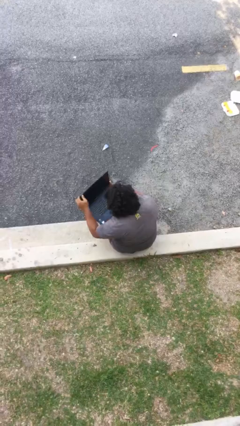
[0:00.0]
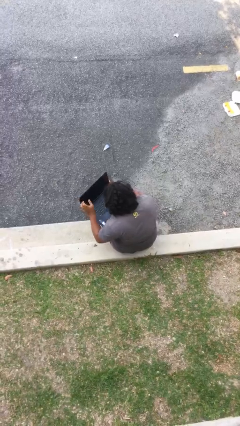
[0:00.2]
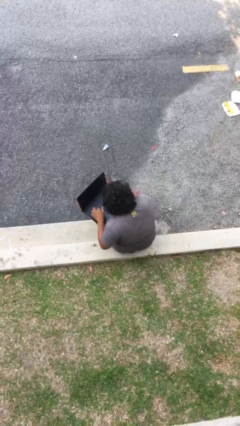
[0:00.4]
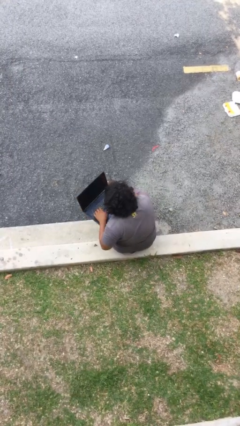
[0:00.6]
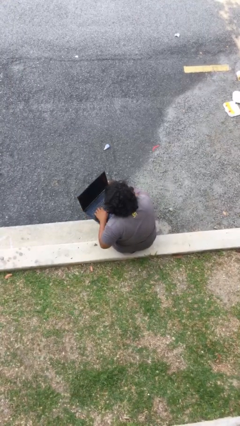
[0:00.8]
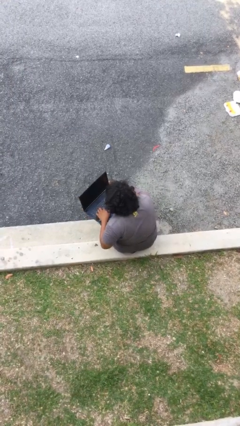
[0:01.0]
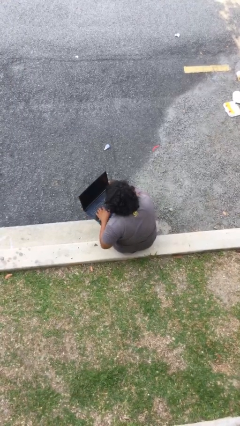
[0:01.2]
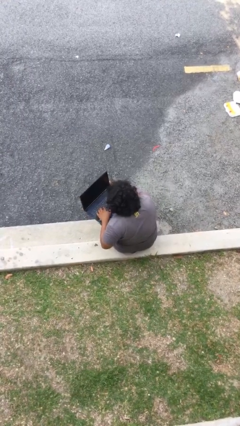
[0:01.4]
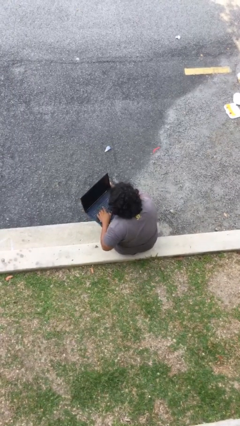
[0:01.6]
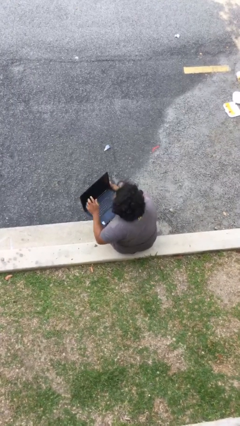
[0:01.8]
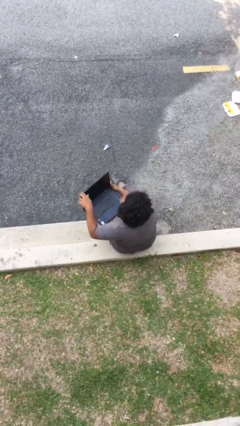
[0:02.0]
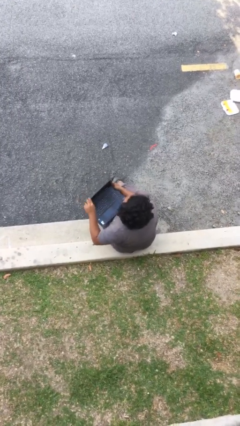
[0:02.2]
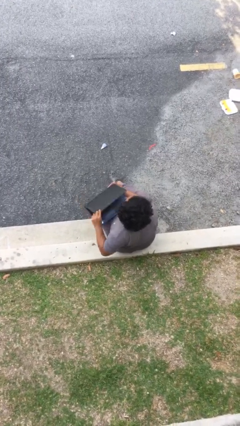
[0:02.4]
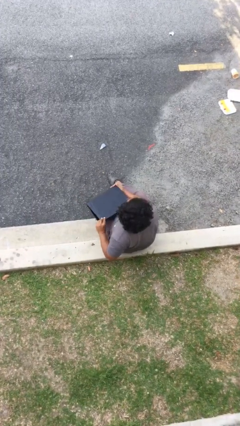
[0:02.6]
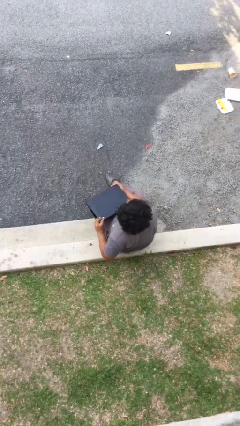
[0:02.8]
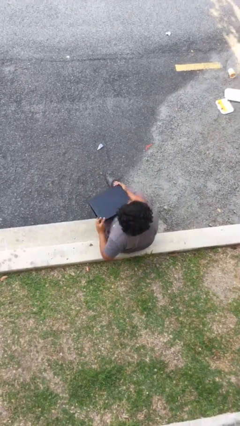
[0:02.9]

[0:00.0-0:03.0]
person interacts with laptop

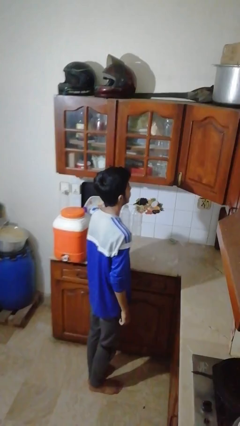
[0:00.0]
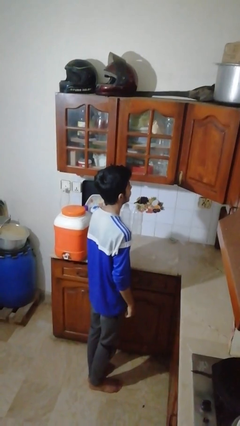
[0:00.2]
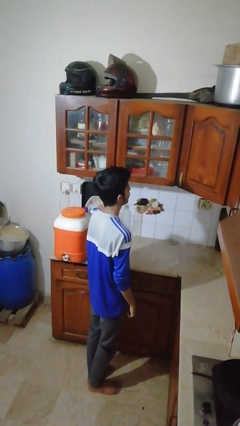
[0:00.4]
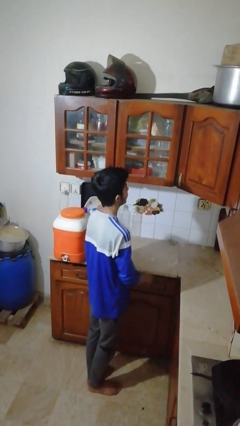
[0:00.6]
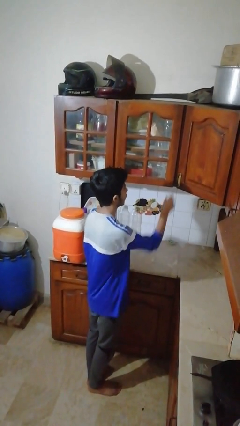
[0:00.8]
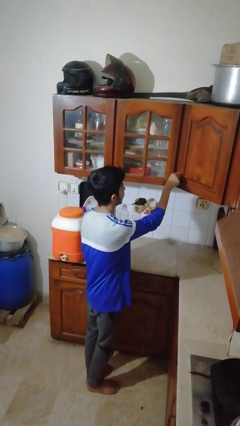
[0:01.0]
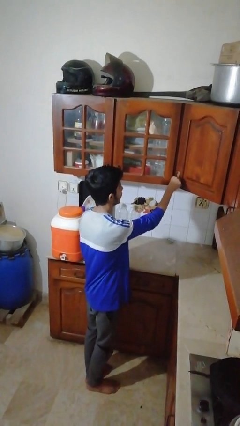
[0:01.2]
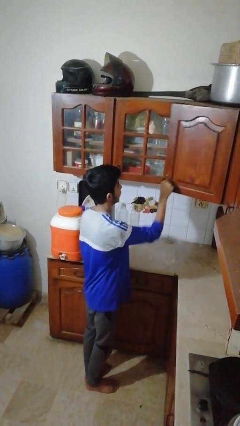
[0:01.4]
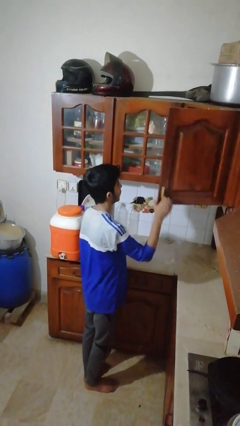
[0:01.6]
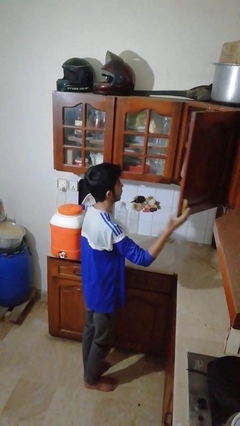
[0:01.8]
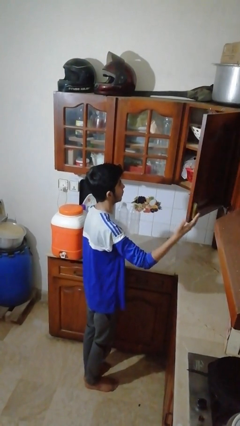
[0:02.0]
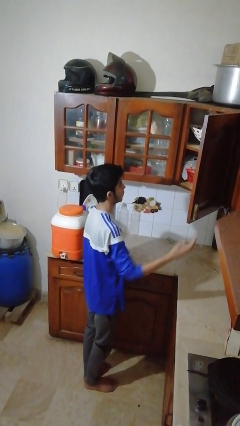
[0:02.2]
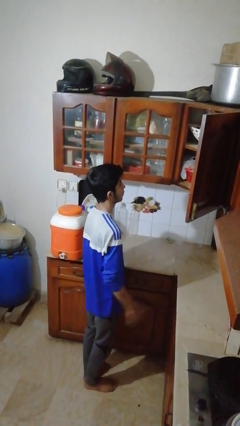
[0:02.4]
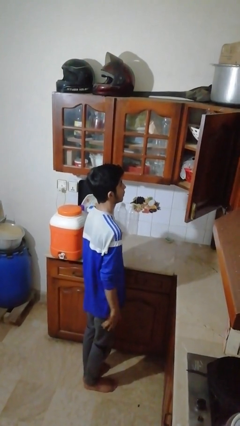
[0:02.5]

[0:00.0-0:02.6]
person opens cabinet

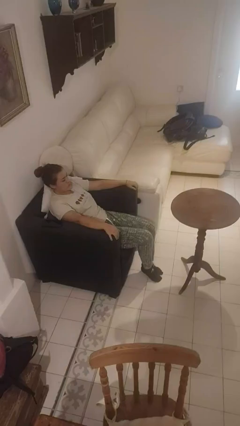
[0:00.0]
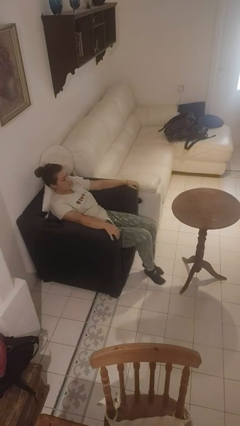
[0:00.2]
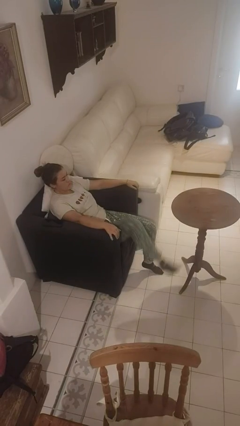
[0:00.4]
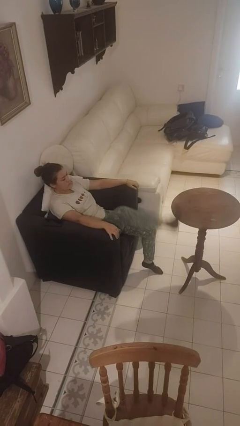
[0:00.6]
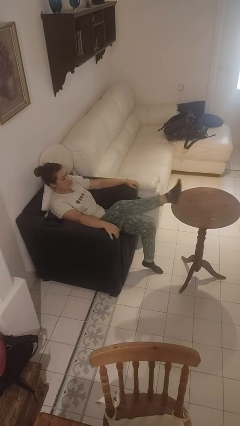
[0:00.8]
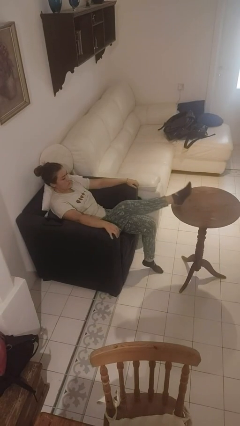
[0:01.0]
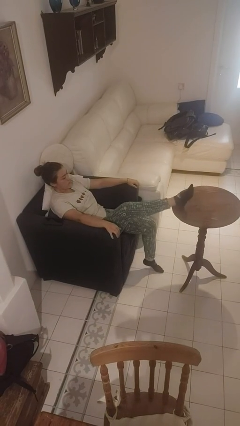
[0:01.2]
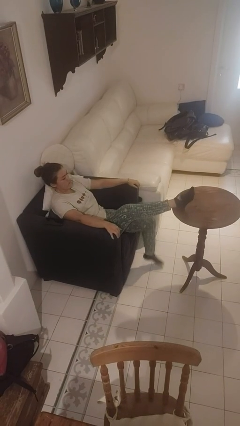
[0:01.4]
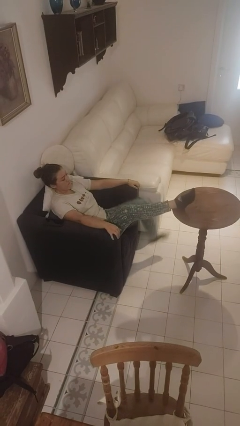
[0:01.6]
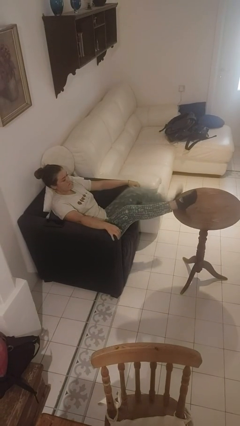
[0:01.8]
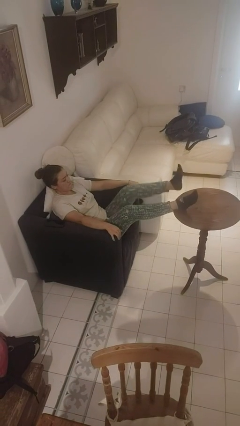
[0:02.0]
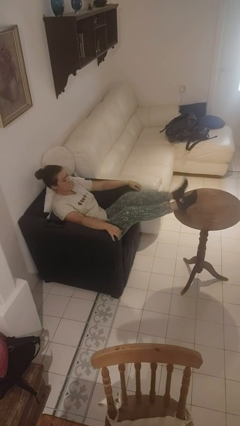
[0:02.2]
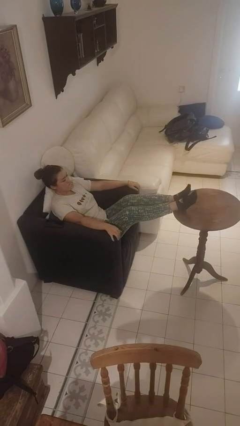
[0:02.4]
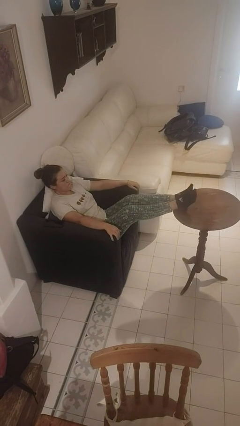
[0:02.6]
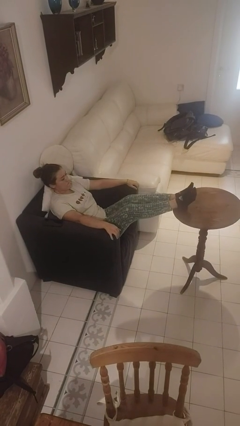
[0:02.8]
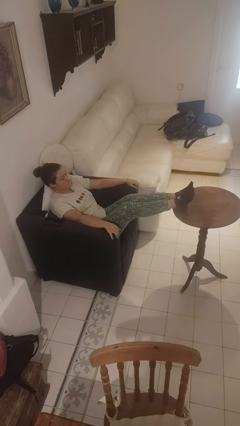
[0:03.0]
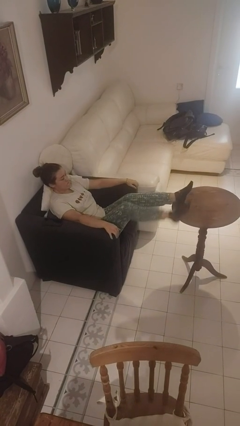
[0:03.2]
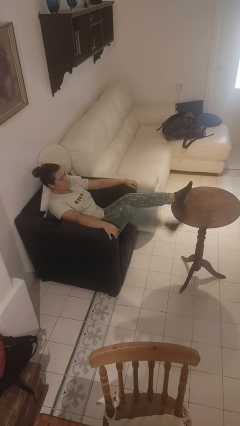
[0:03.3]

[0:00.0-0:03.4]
person puts feet up

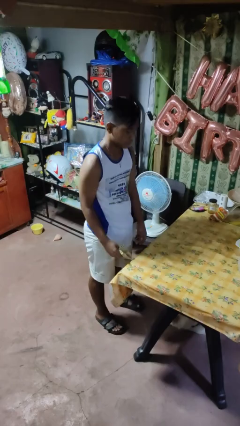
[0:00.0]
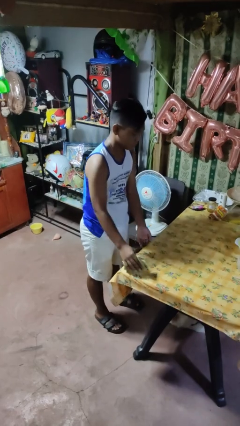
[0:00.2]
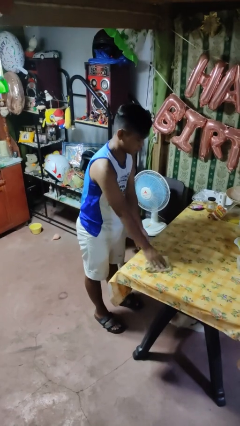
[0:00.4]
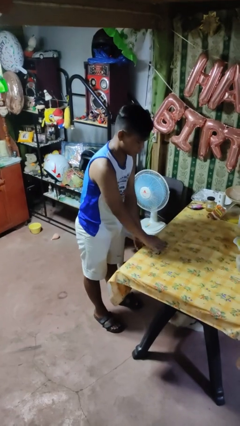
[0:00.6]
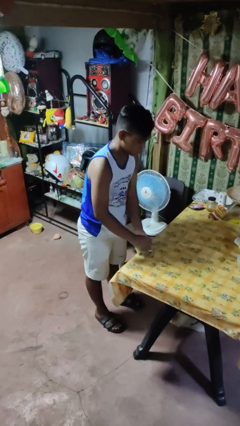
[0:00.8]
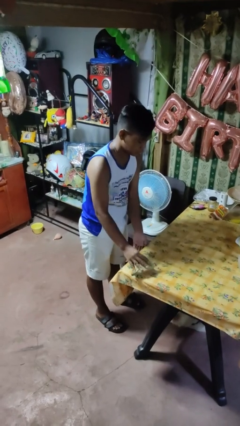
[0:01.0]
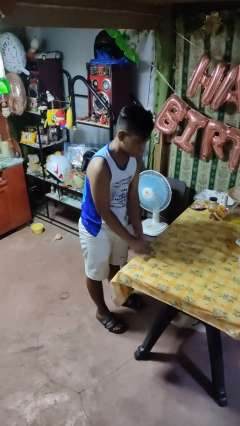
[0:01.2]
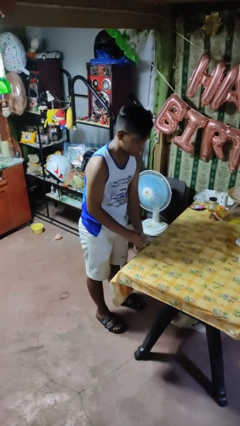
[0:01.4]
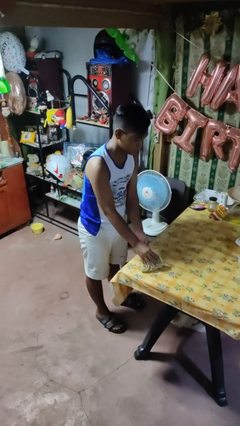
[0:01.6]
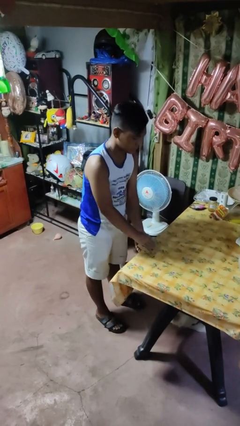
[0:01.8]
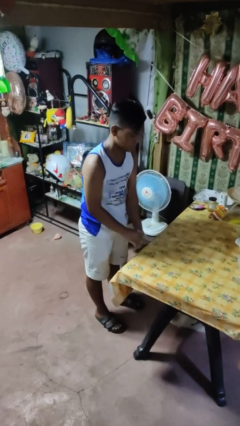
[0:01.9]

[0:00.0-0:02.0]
person cleans table with rag

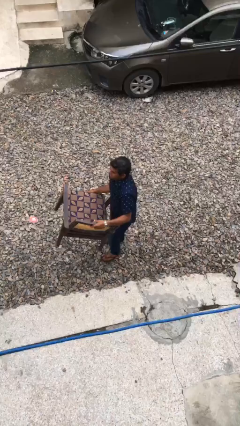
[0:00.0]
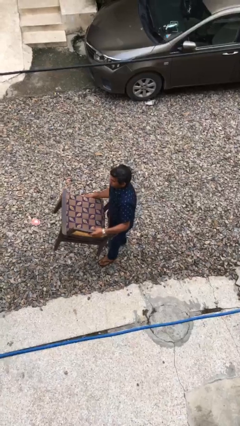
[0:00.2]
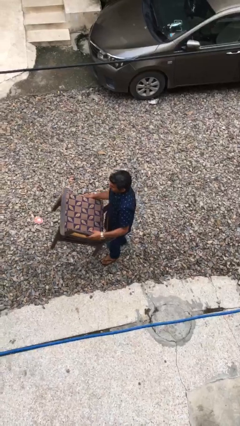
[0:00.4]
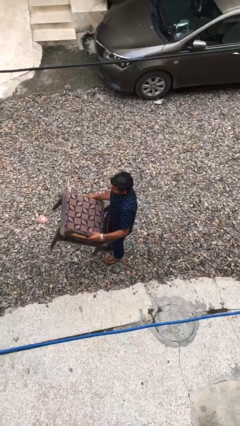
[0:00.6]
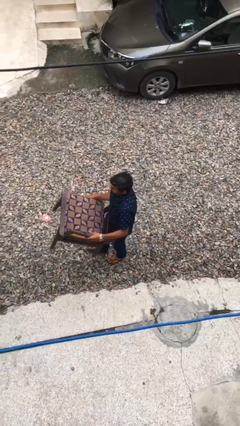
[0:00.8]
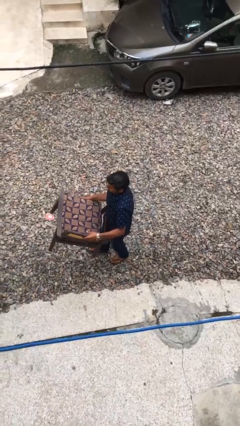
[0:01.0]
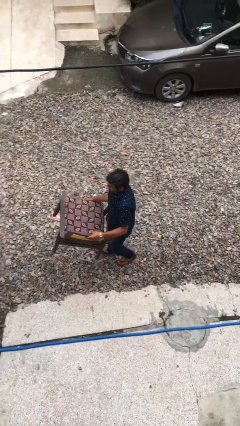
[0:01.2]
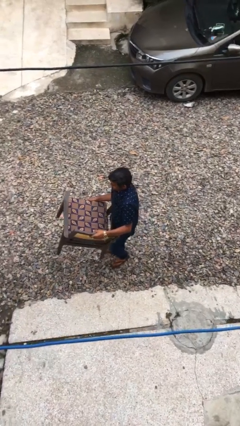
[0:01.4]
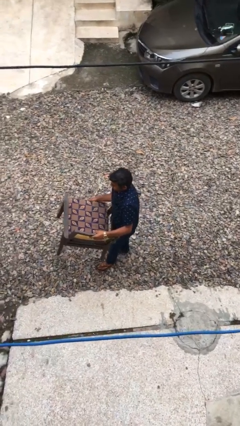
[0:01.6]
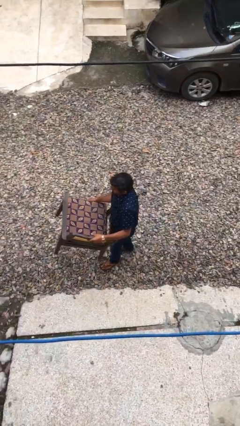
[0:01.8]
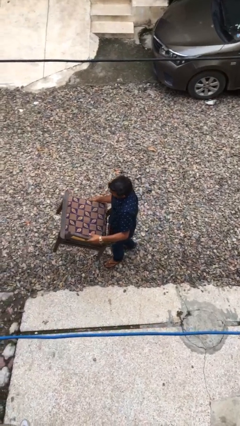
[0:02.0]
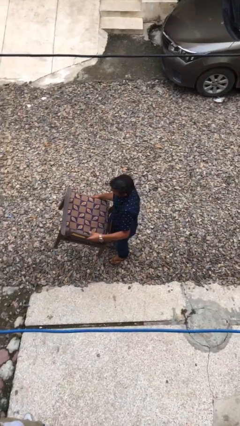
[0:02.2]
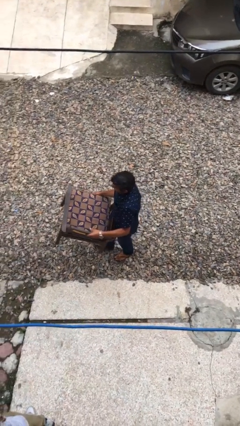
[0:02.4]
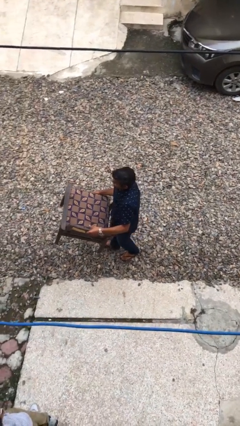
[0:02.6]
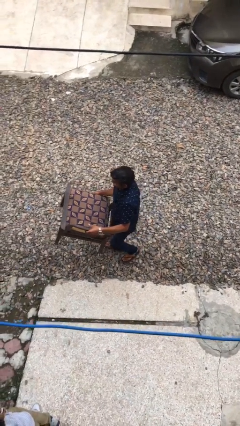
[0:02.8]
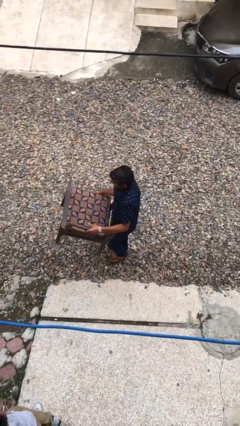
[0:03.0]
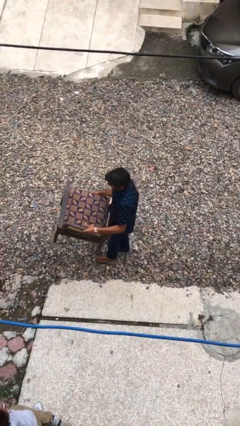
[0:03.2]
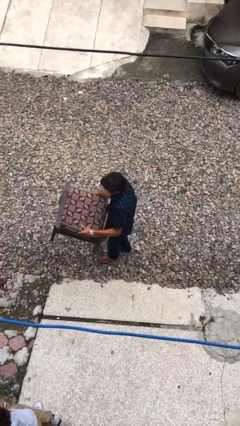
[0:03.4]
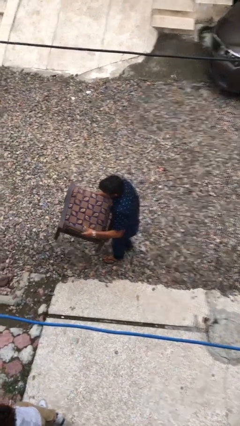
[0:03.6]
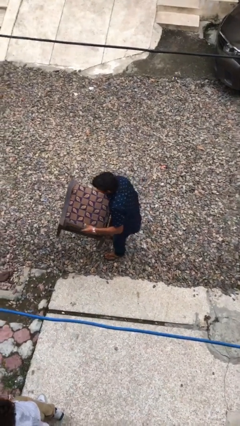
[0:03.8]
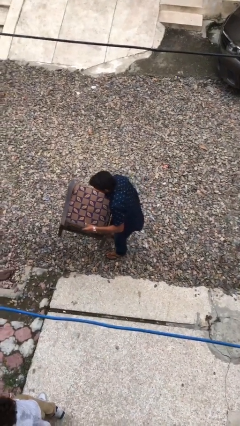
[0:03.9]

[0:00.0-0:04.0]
person carries heavy object

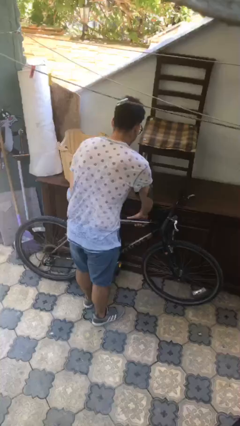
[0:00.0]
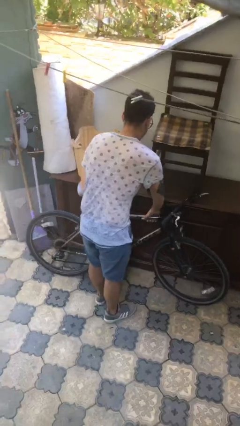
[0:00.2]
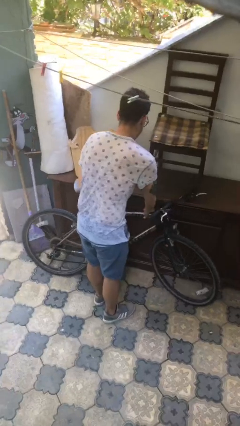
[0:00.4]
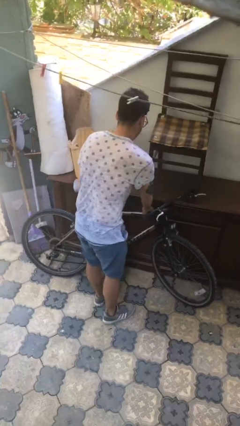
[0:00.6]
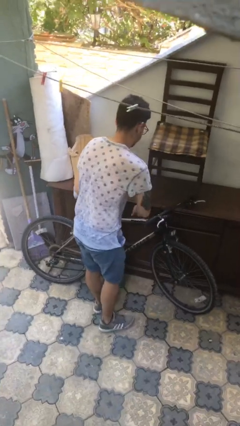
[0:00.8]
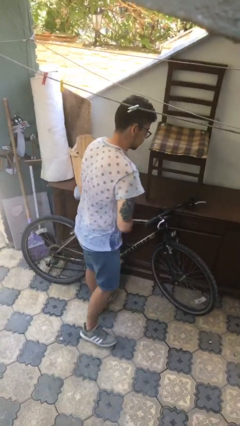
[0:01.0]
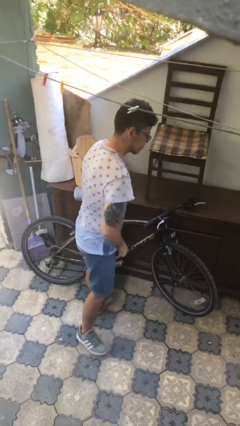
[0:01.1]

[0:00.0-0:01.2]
person puts down object on floor

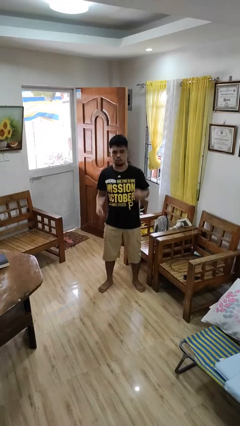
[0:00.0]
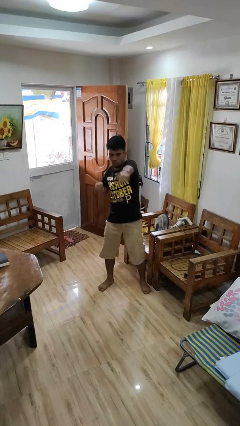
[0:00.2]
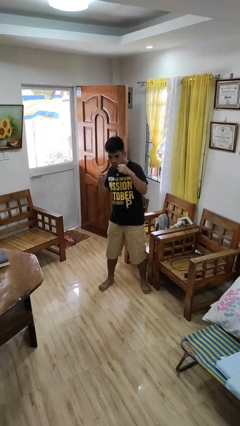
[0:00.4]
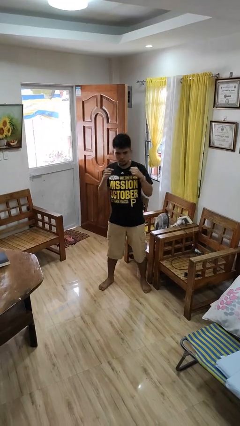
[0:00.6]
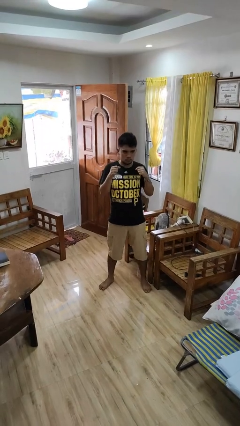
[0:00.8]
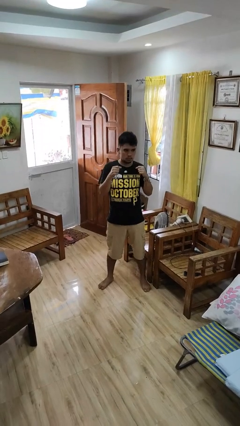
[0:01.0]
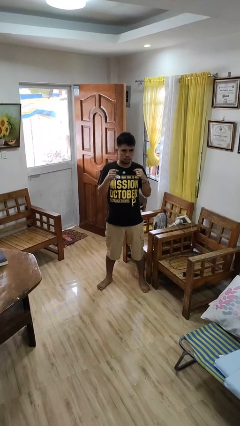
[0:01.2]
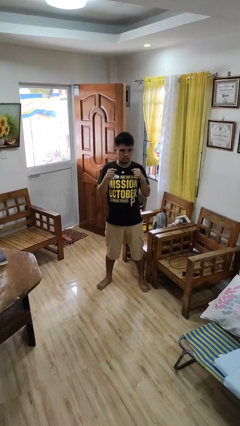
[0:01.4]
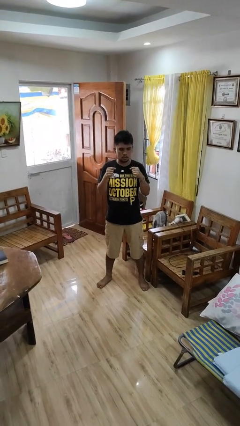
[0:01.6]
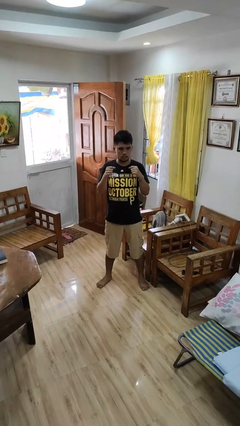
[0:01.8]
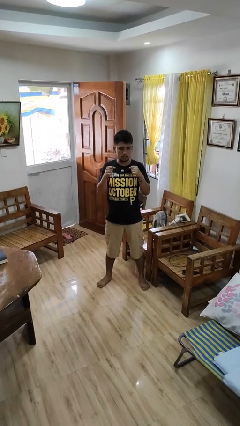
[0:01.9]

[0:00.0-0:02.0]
person punches
